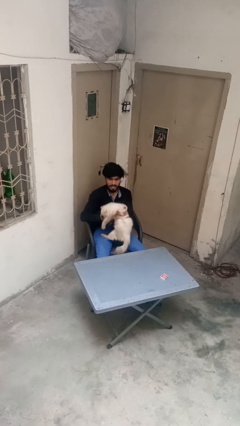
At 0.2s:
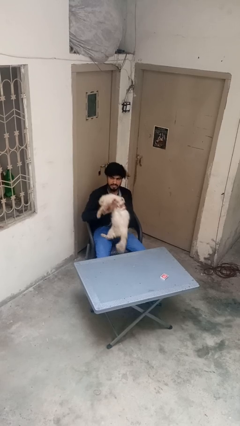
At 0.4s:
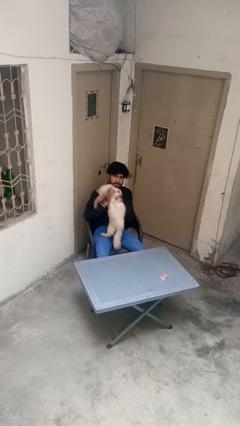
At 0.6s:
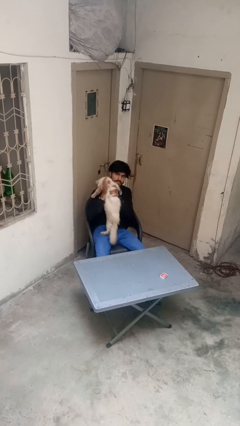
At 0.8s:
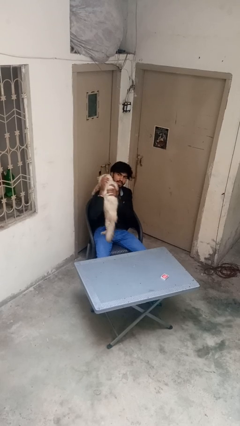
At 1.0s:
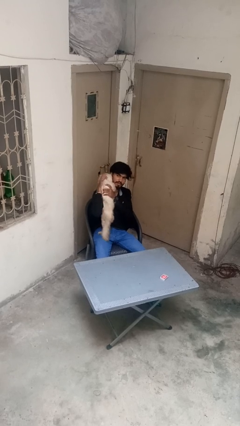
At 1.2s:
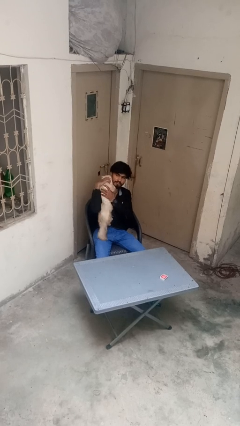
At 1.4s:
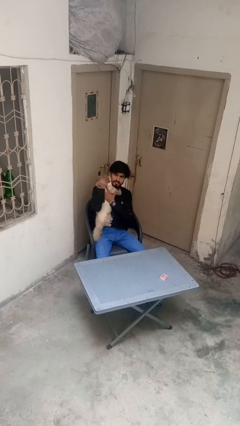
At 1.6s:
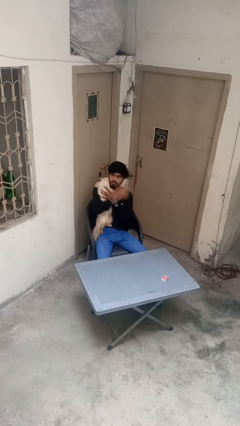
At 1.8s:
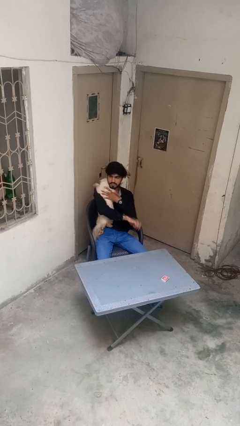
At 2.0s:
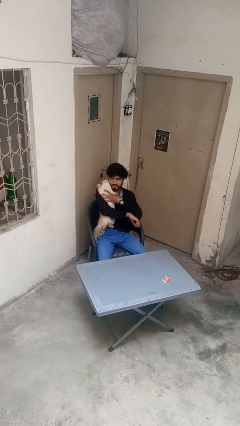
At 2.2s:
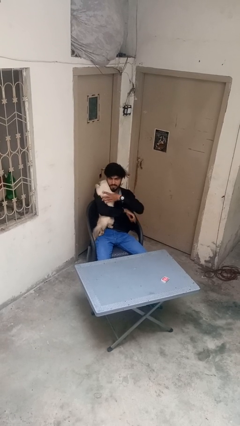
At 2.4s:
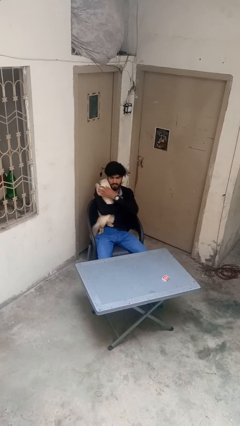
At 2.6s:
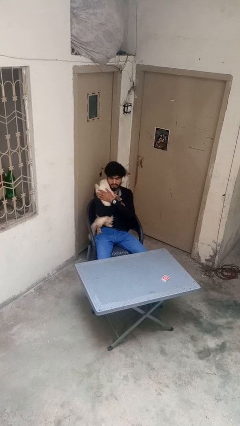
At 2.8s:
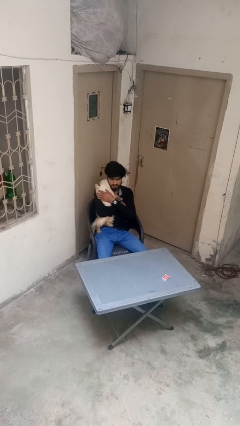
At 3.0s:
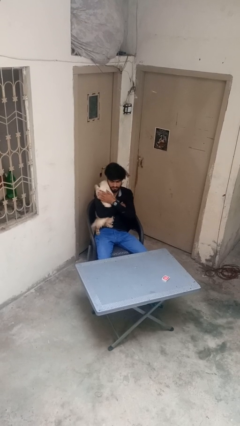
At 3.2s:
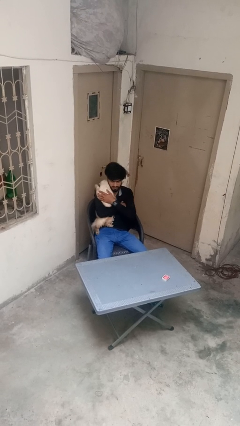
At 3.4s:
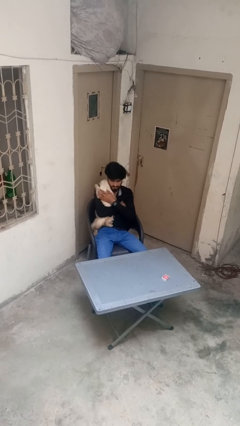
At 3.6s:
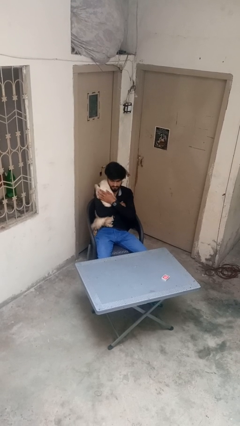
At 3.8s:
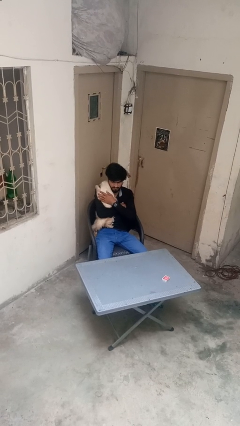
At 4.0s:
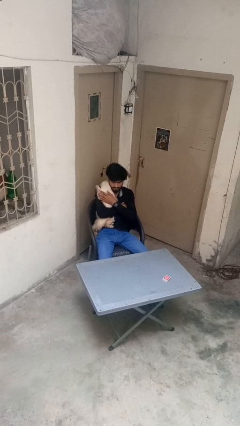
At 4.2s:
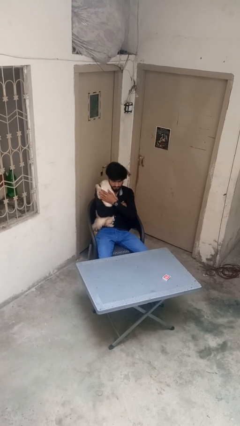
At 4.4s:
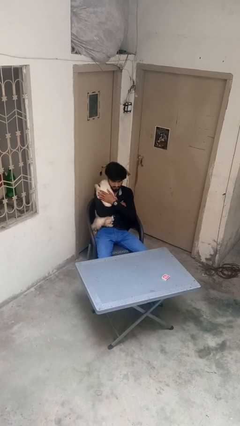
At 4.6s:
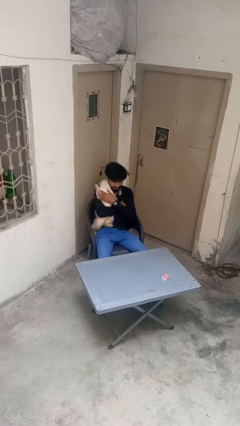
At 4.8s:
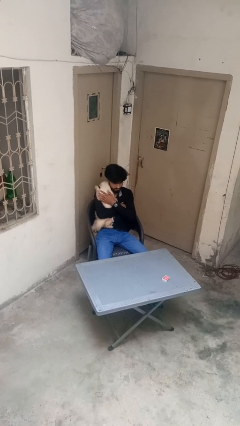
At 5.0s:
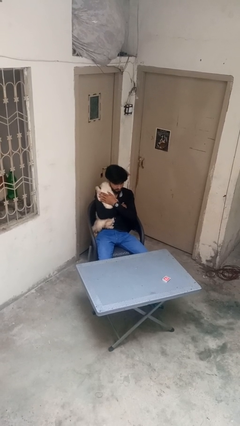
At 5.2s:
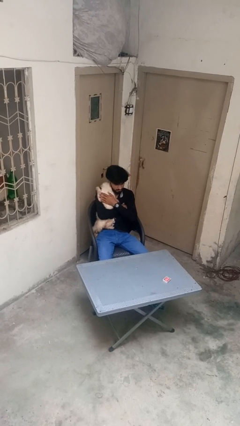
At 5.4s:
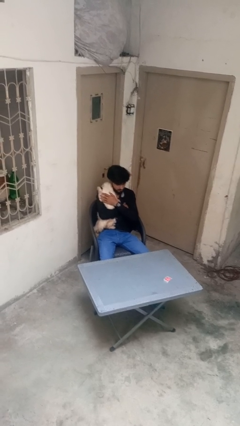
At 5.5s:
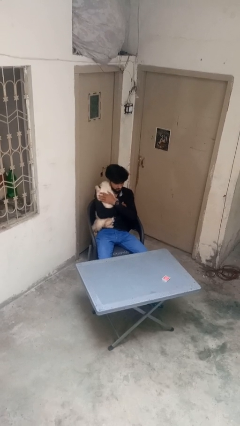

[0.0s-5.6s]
person hugs cat

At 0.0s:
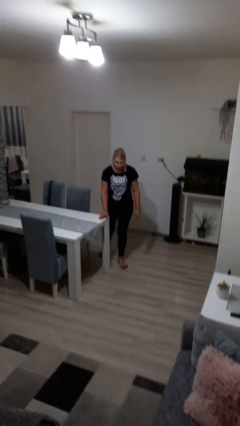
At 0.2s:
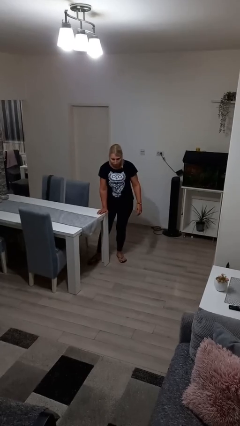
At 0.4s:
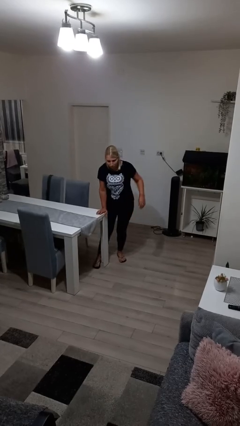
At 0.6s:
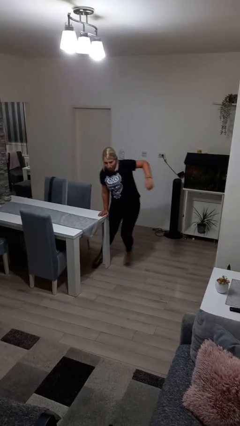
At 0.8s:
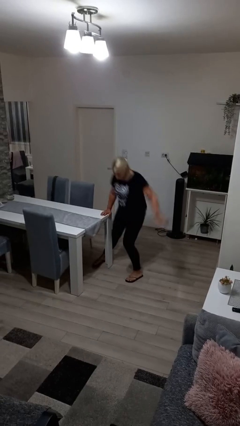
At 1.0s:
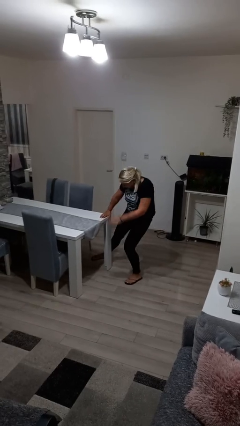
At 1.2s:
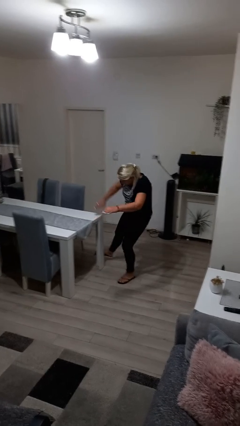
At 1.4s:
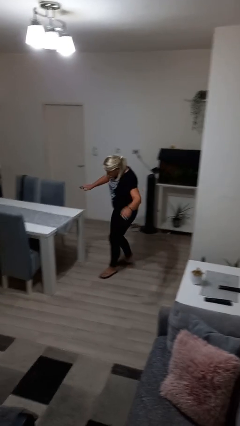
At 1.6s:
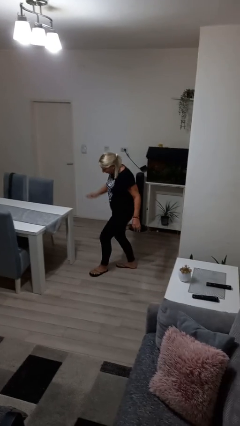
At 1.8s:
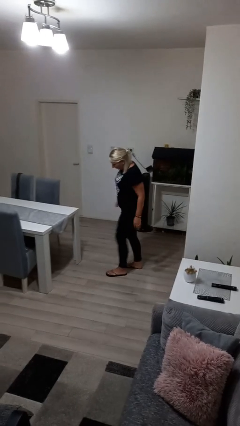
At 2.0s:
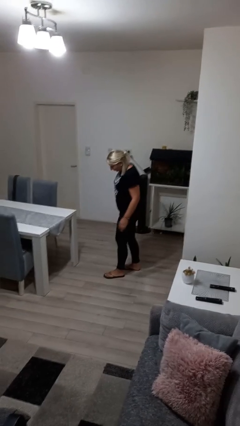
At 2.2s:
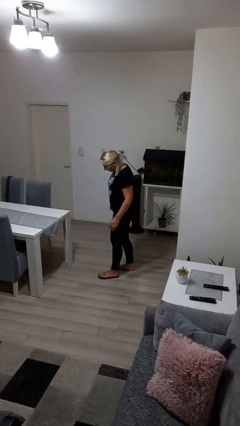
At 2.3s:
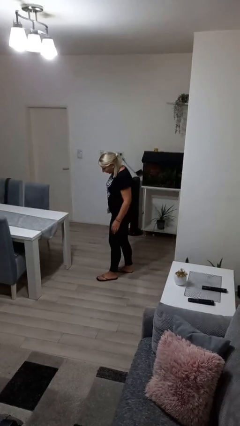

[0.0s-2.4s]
person bumps into table

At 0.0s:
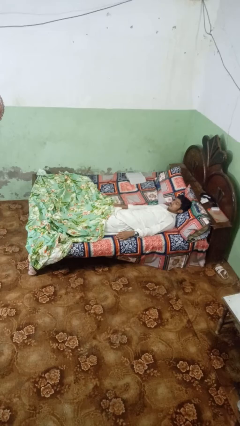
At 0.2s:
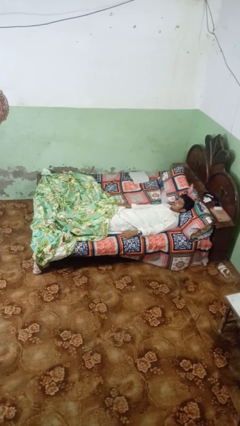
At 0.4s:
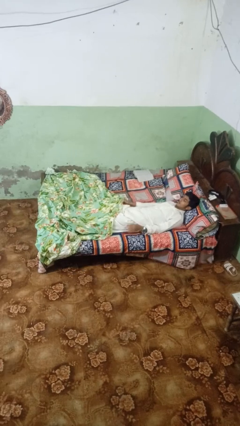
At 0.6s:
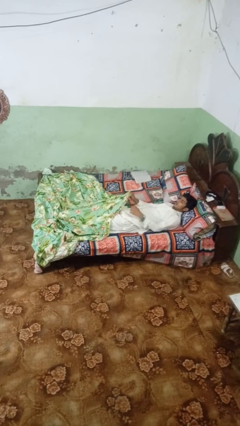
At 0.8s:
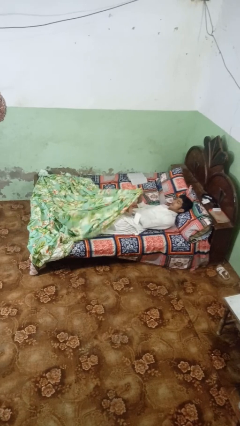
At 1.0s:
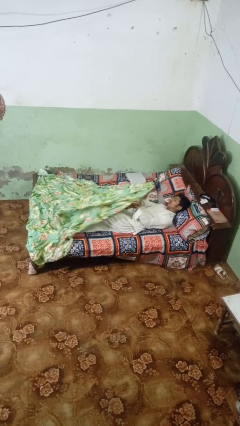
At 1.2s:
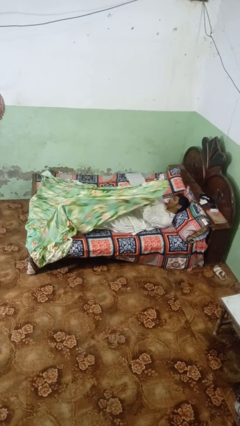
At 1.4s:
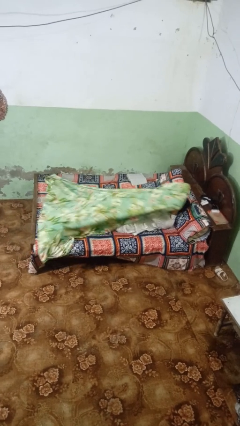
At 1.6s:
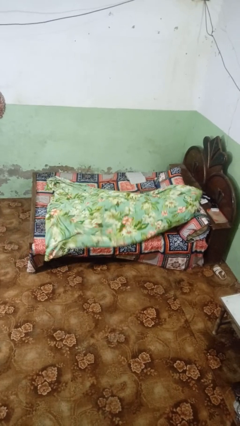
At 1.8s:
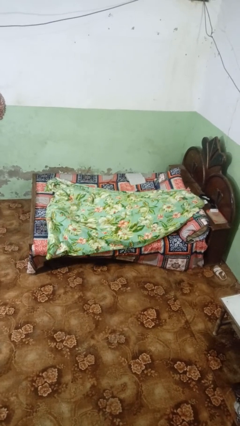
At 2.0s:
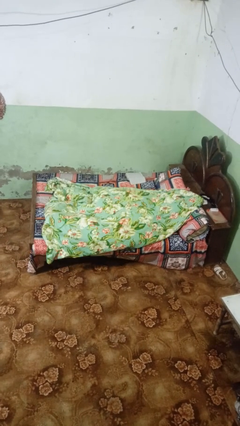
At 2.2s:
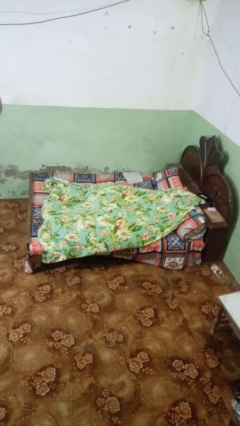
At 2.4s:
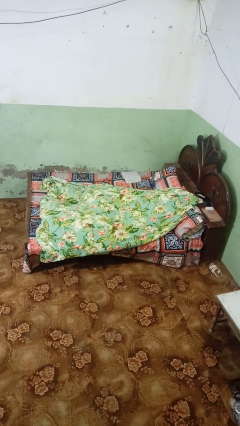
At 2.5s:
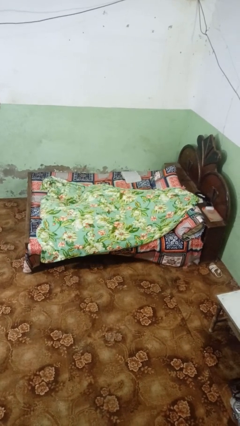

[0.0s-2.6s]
person covers with bedsheets

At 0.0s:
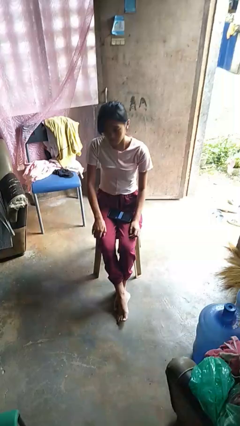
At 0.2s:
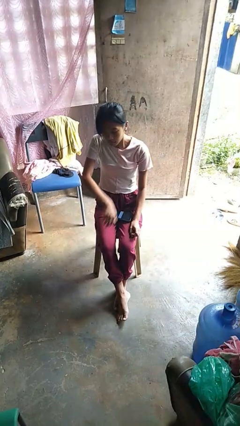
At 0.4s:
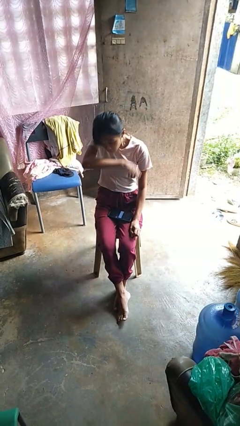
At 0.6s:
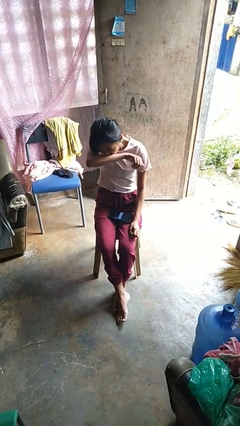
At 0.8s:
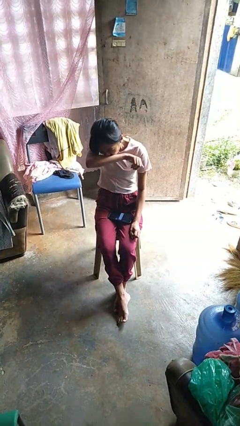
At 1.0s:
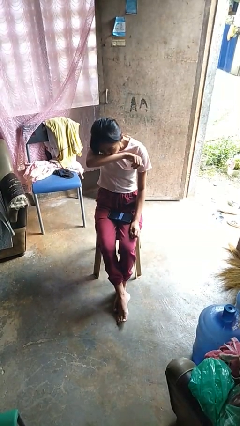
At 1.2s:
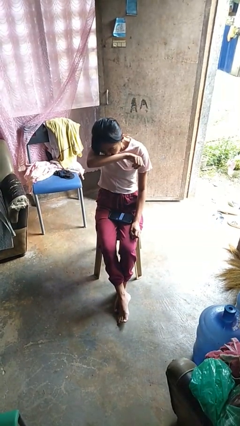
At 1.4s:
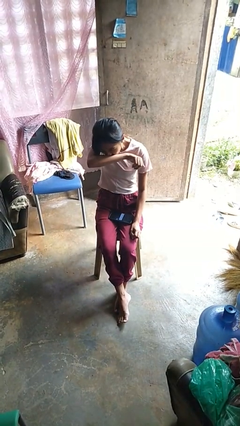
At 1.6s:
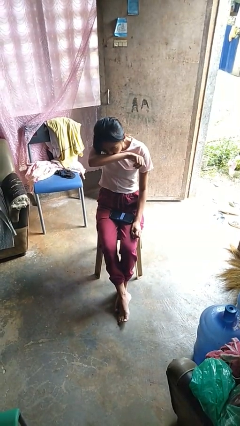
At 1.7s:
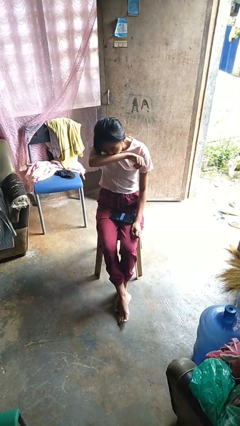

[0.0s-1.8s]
person sneezes into arm

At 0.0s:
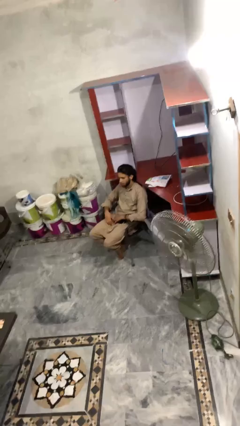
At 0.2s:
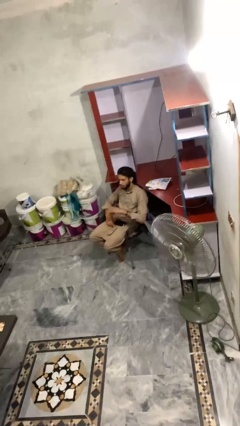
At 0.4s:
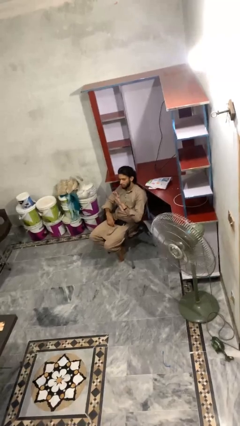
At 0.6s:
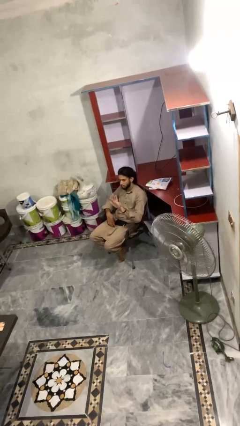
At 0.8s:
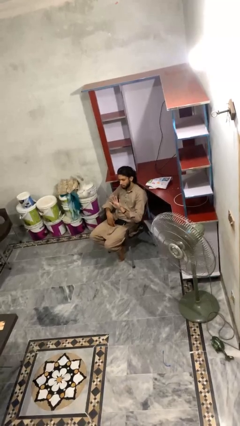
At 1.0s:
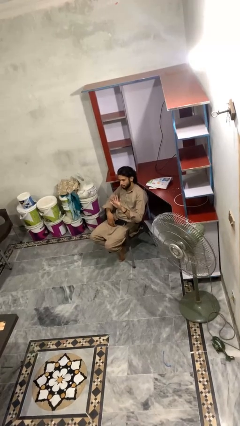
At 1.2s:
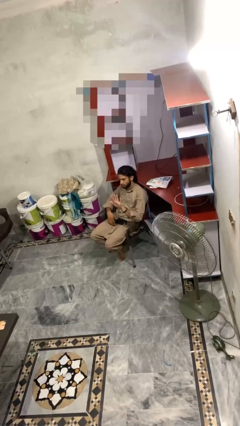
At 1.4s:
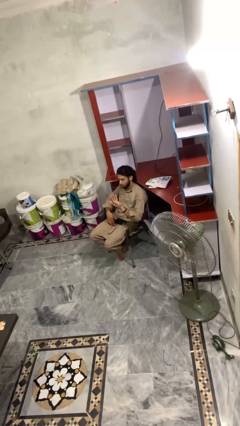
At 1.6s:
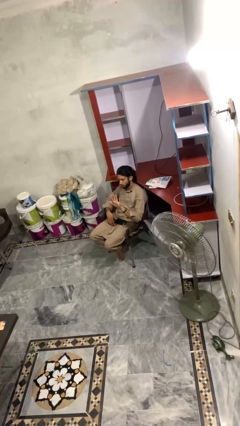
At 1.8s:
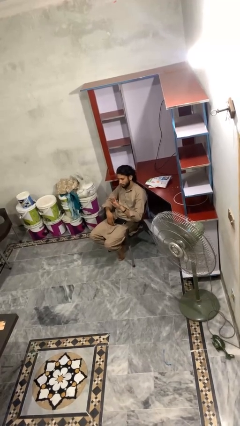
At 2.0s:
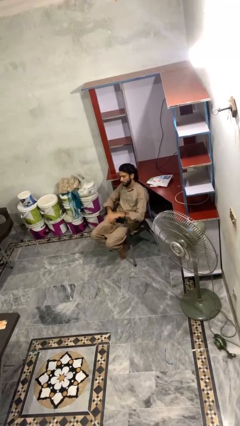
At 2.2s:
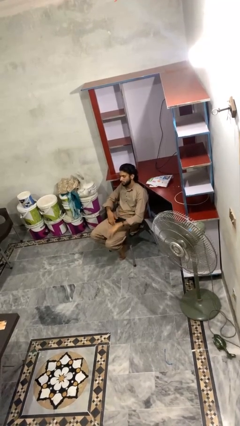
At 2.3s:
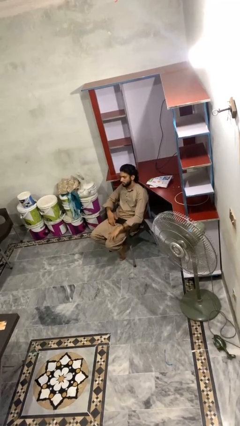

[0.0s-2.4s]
person gestures number five

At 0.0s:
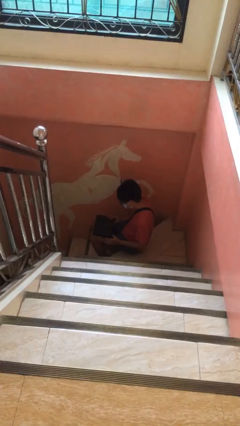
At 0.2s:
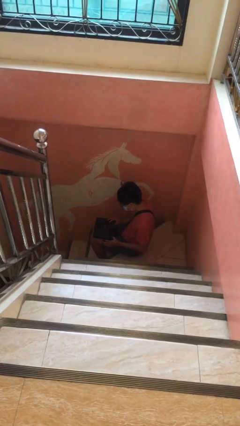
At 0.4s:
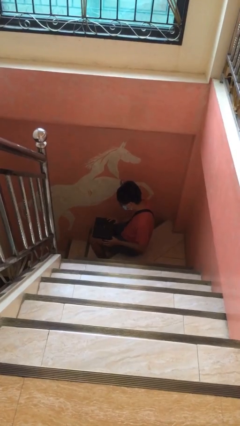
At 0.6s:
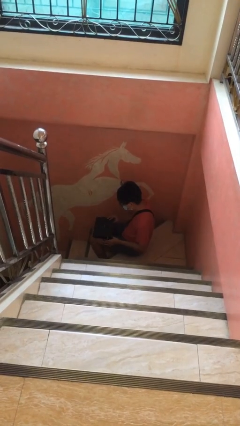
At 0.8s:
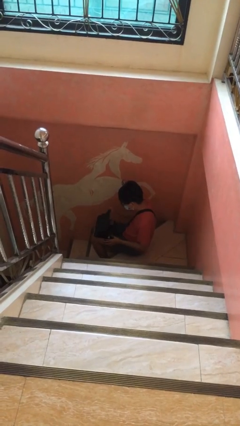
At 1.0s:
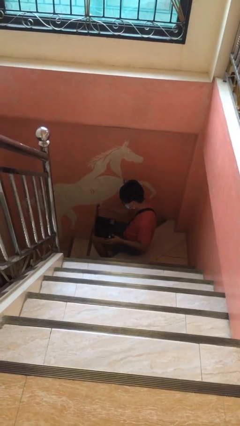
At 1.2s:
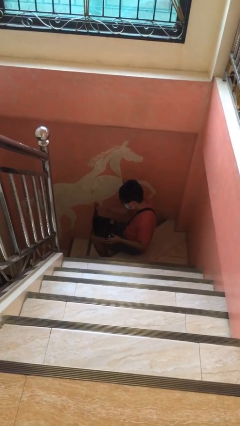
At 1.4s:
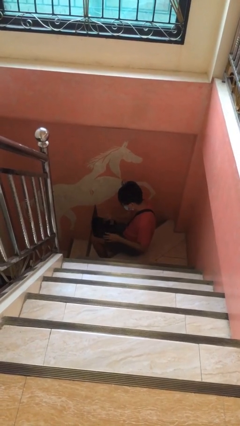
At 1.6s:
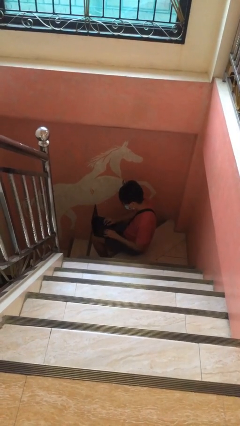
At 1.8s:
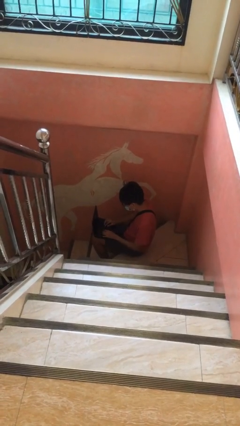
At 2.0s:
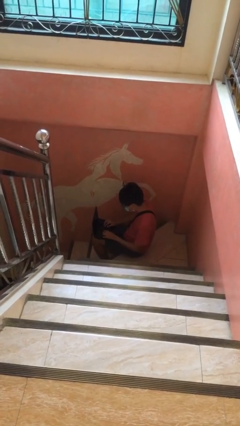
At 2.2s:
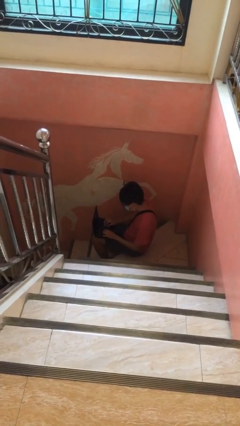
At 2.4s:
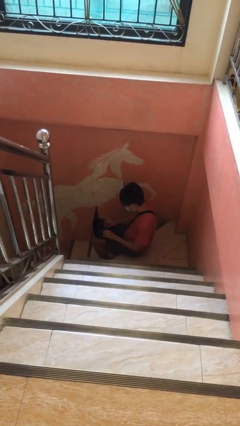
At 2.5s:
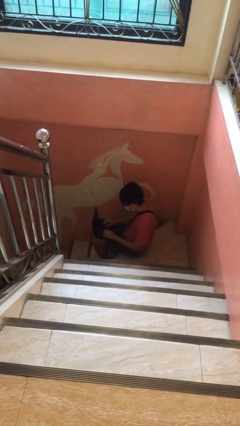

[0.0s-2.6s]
person interacts with laptop

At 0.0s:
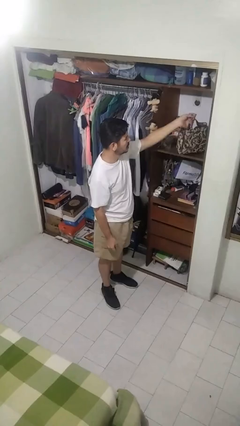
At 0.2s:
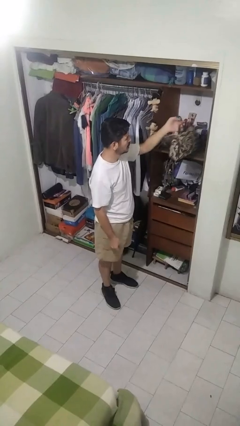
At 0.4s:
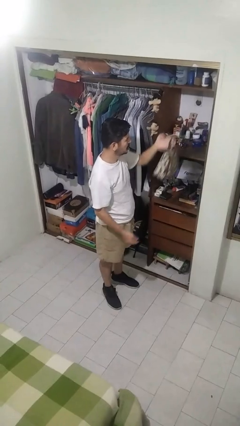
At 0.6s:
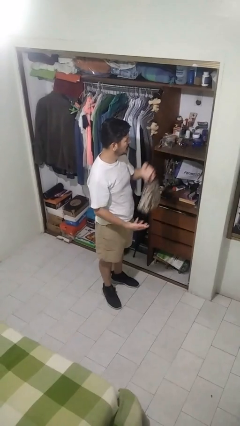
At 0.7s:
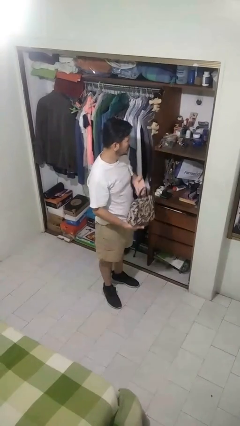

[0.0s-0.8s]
person puts down object on shelf
